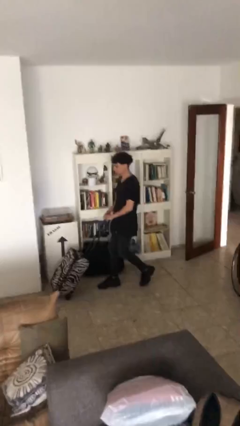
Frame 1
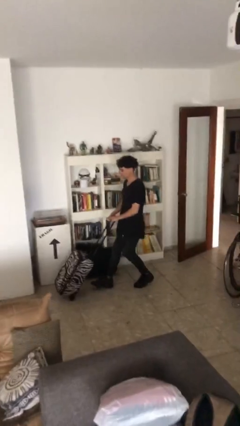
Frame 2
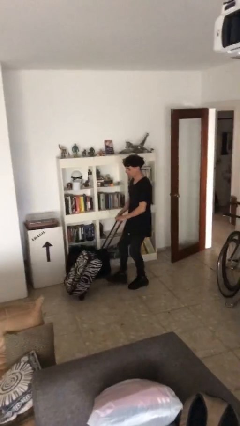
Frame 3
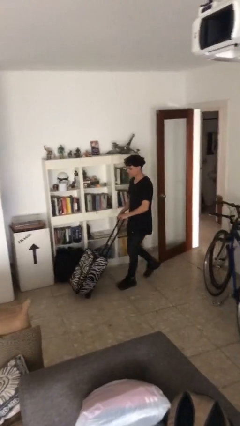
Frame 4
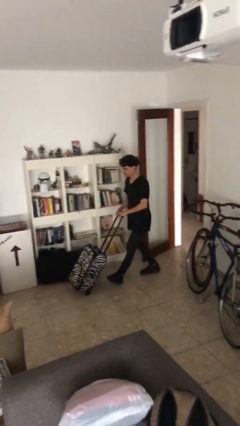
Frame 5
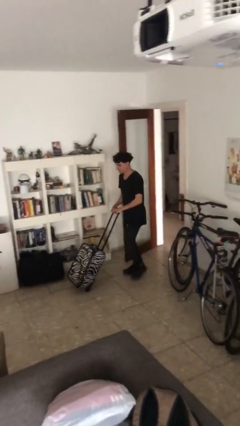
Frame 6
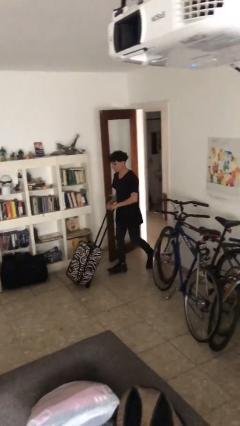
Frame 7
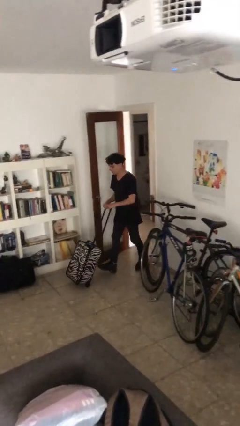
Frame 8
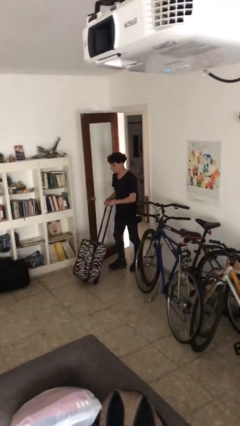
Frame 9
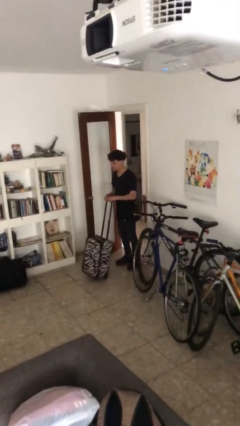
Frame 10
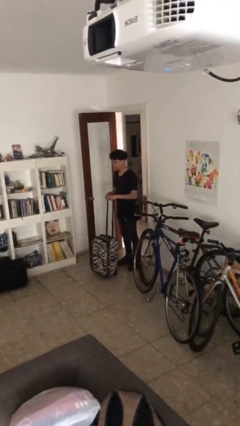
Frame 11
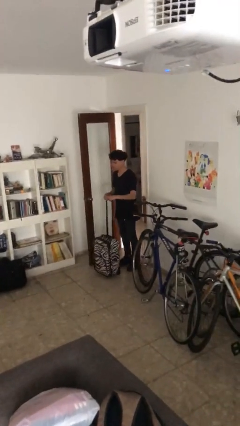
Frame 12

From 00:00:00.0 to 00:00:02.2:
person pulls wheeled cart

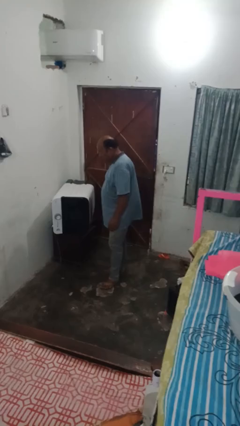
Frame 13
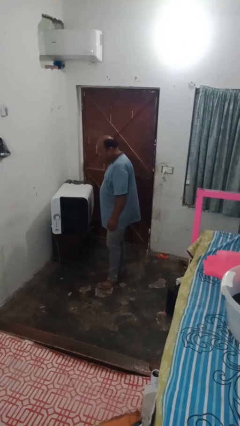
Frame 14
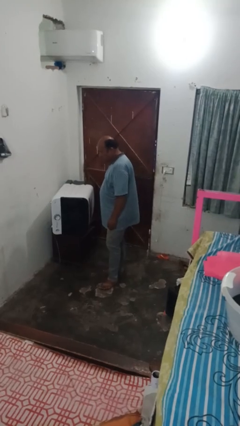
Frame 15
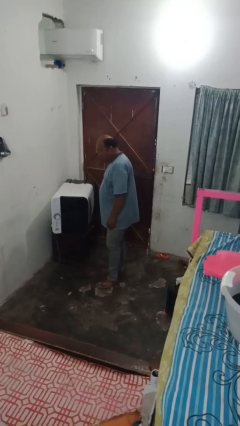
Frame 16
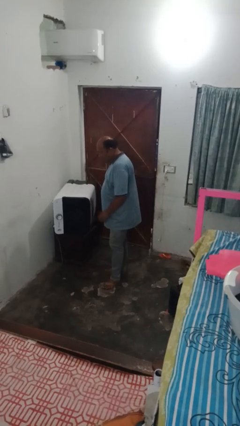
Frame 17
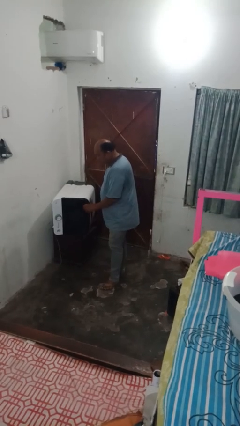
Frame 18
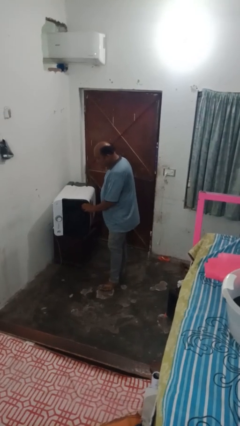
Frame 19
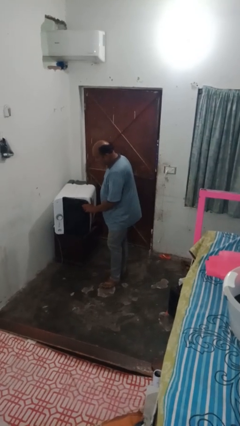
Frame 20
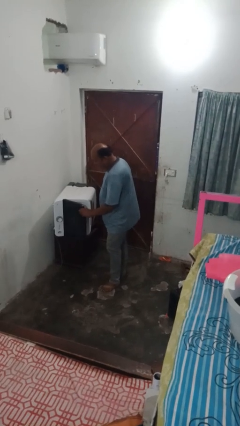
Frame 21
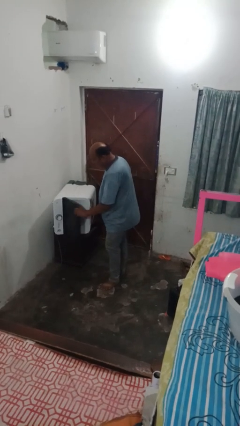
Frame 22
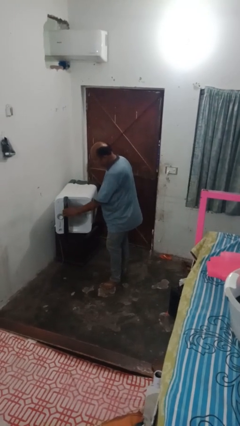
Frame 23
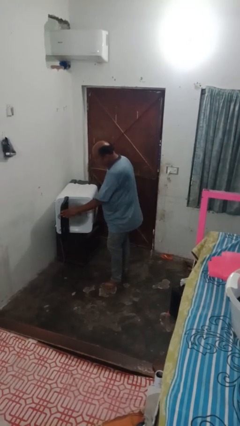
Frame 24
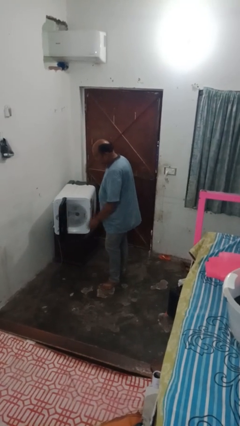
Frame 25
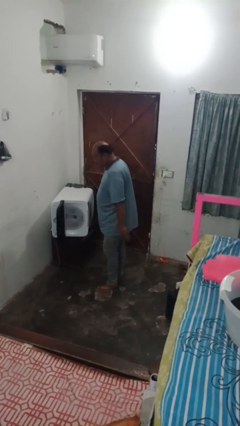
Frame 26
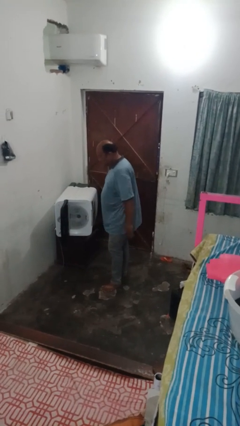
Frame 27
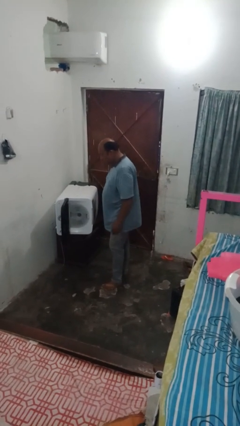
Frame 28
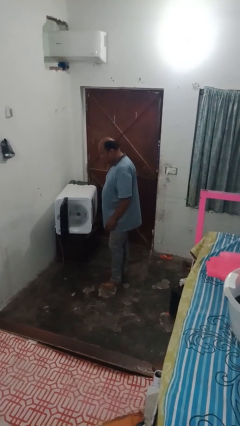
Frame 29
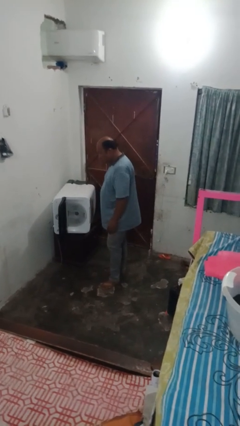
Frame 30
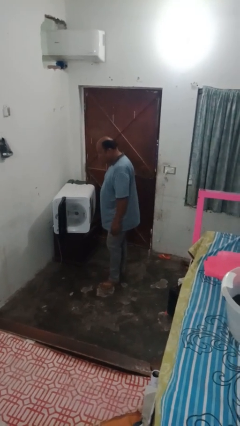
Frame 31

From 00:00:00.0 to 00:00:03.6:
person opens dishwasher

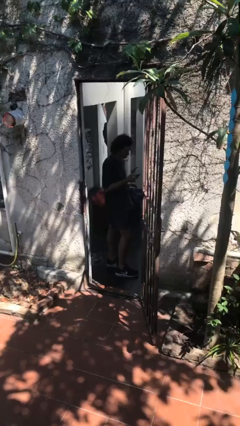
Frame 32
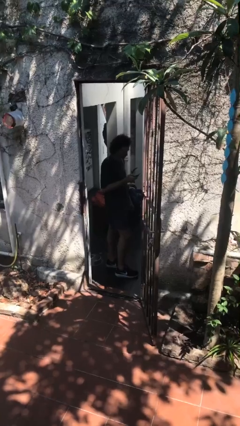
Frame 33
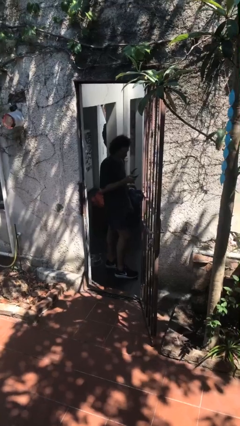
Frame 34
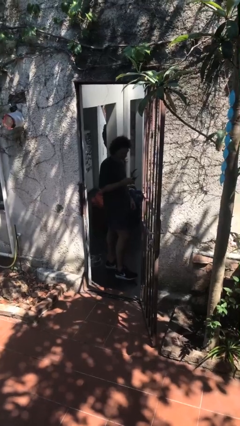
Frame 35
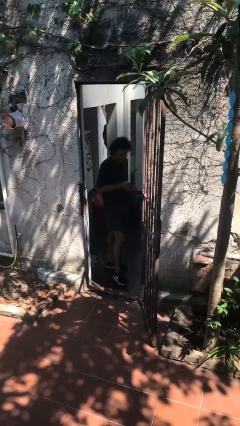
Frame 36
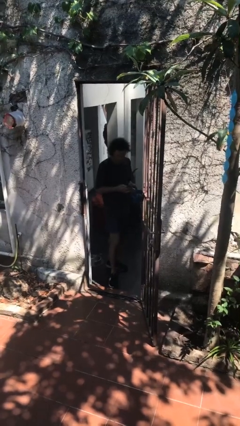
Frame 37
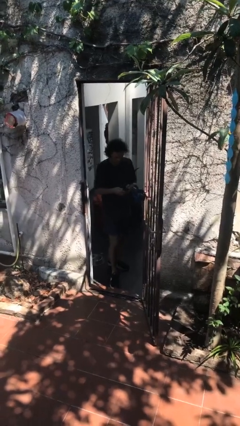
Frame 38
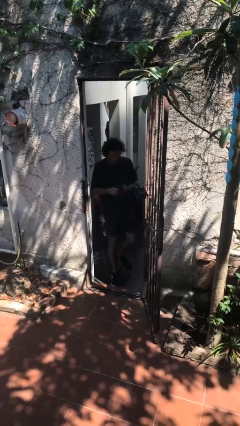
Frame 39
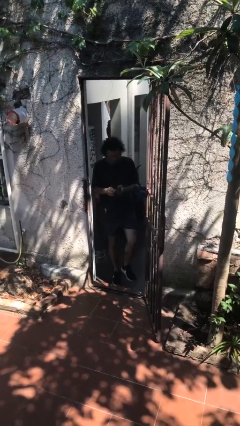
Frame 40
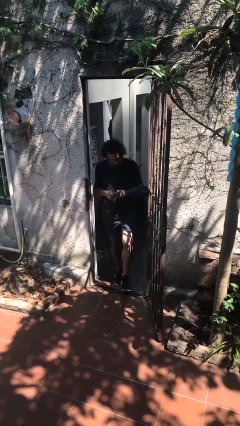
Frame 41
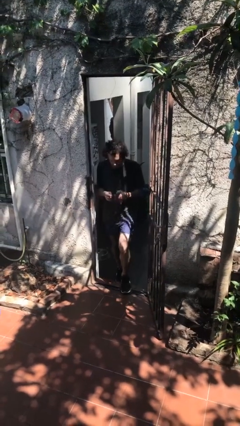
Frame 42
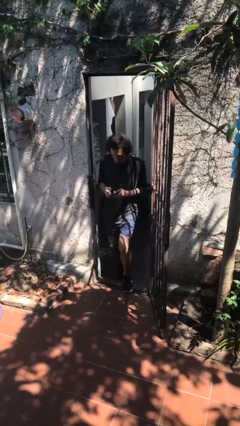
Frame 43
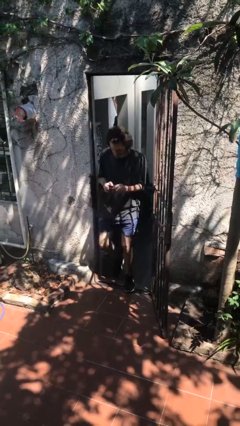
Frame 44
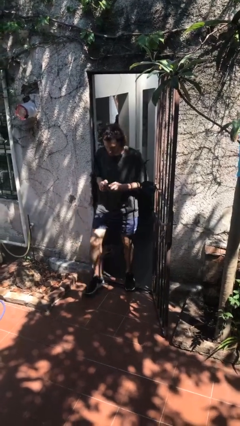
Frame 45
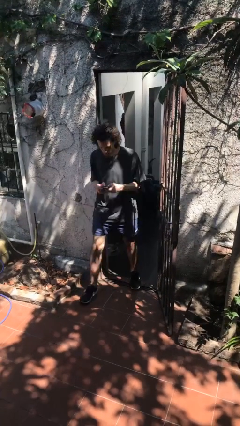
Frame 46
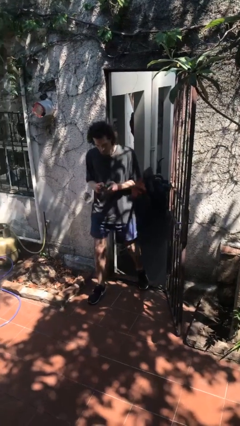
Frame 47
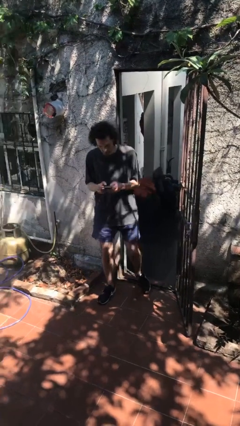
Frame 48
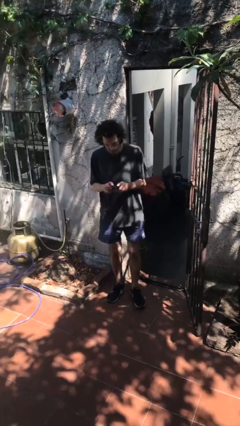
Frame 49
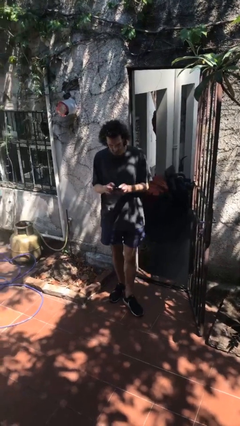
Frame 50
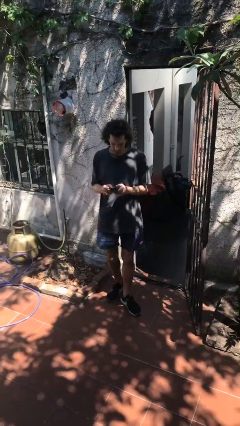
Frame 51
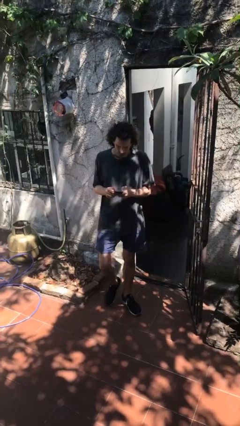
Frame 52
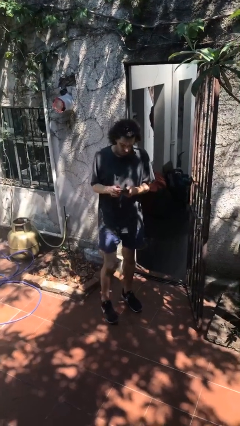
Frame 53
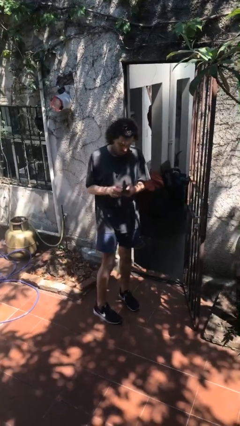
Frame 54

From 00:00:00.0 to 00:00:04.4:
person enters scene through structure

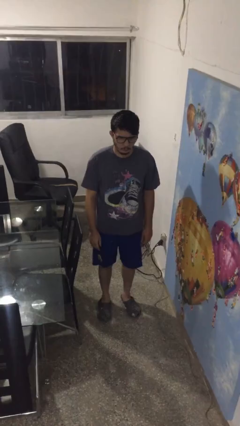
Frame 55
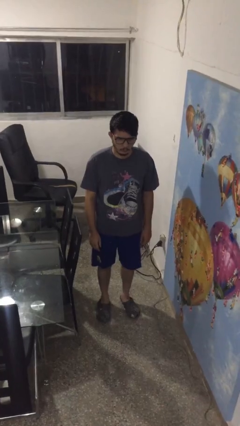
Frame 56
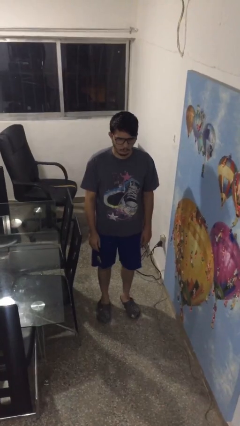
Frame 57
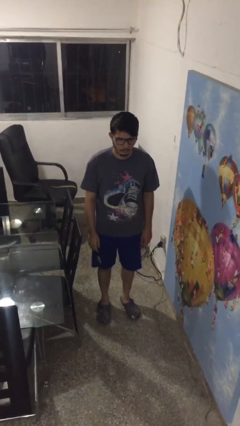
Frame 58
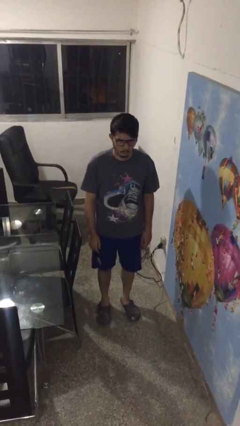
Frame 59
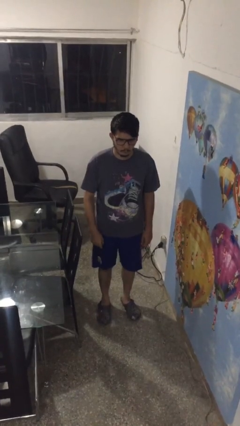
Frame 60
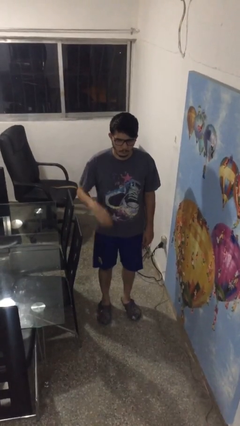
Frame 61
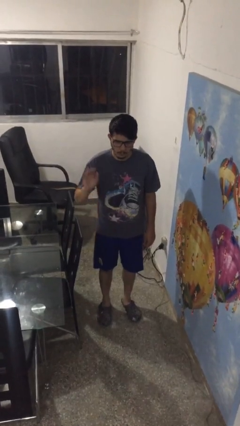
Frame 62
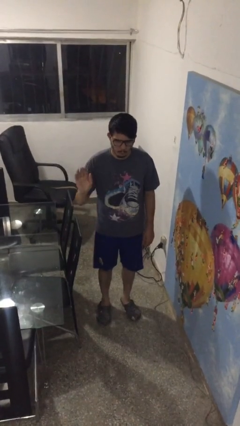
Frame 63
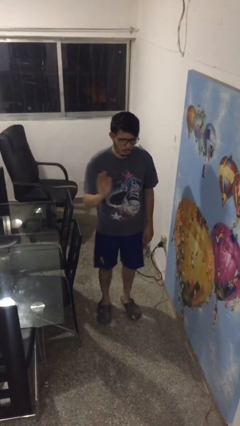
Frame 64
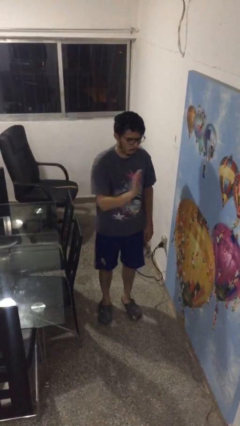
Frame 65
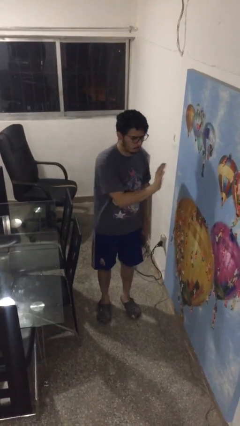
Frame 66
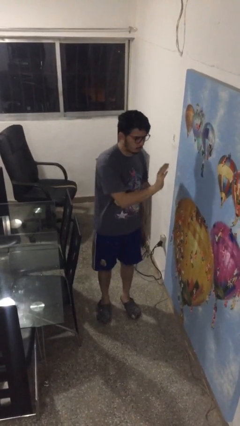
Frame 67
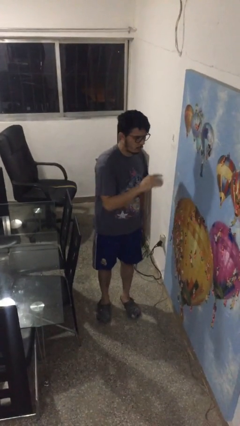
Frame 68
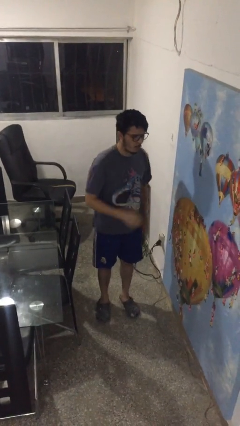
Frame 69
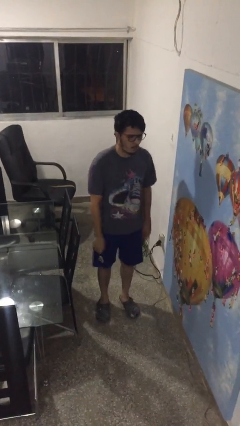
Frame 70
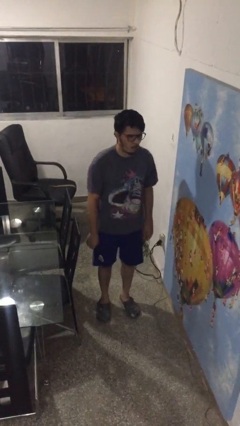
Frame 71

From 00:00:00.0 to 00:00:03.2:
person gestures swipe left

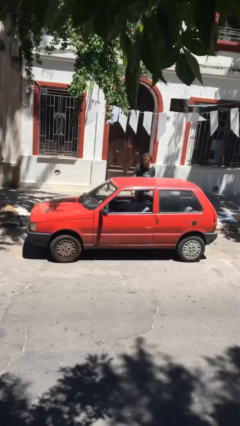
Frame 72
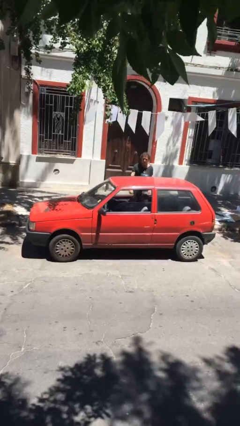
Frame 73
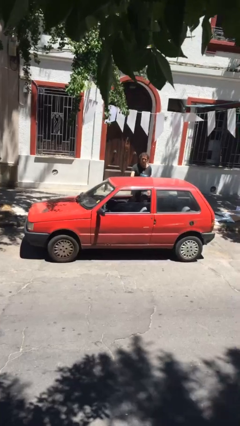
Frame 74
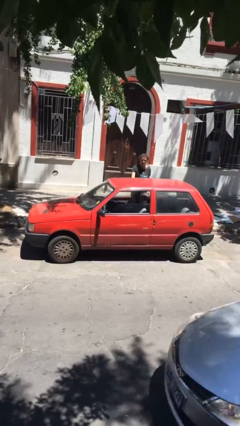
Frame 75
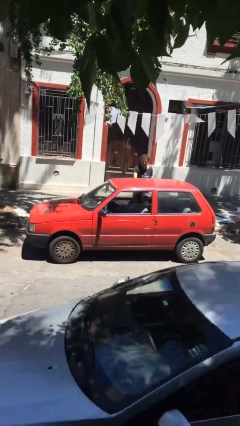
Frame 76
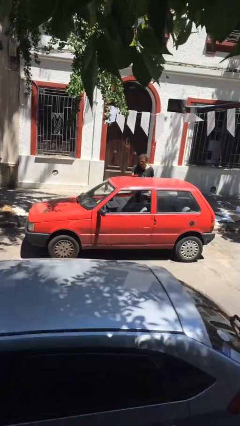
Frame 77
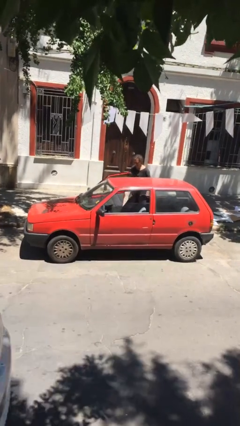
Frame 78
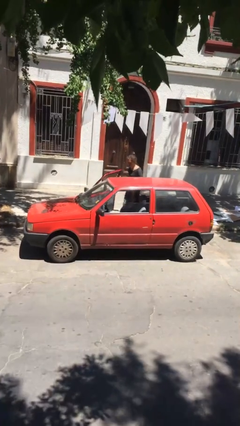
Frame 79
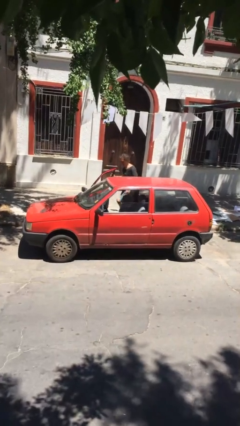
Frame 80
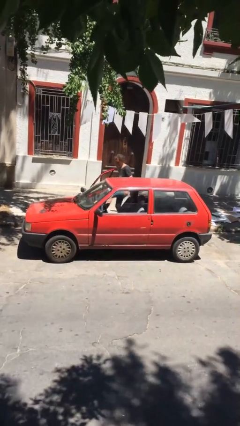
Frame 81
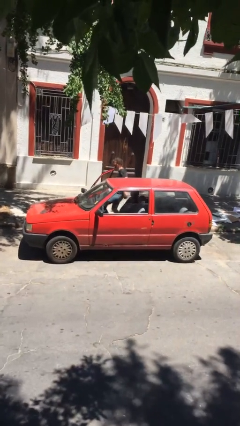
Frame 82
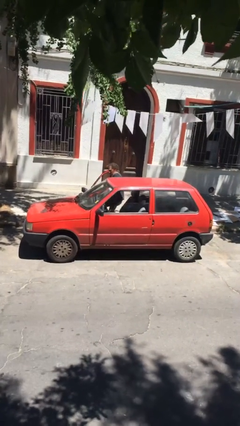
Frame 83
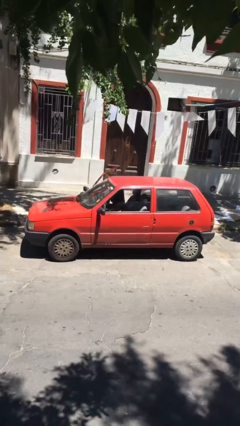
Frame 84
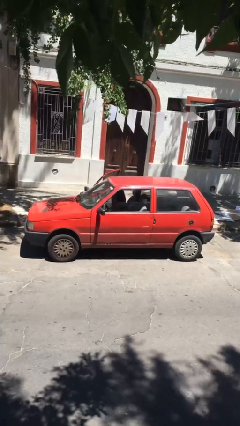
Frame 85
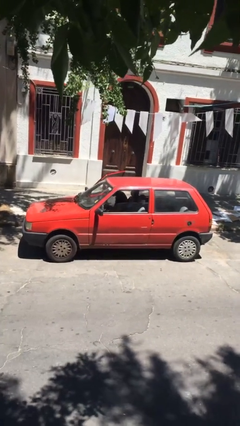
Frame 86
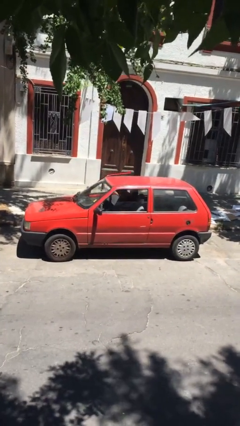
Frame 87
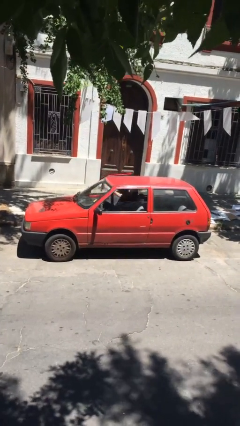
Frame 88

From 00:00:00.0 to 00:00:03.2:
car picks up person

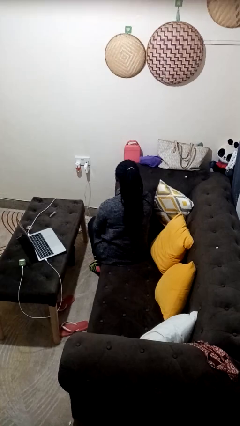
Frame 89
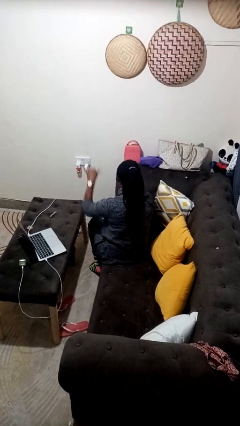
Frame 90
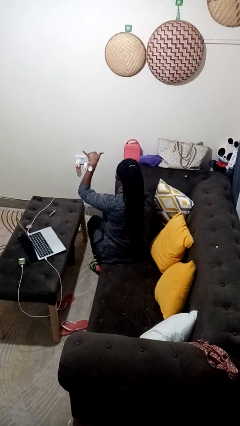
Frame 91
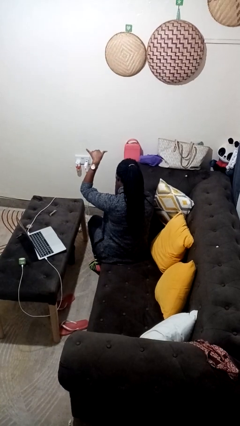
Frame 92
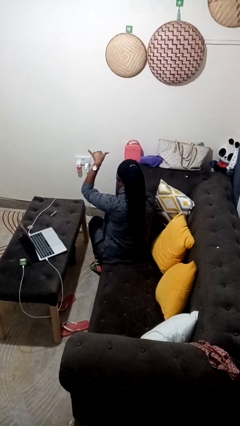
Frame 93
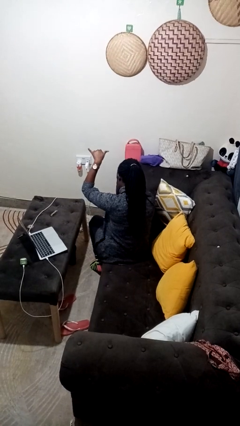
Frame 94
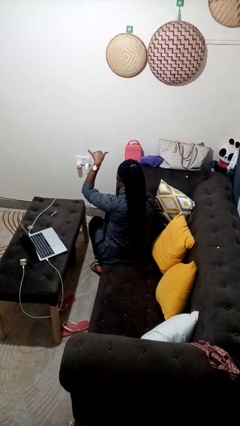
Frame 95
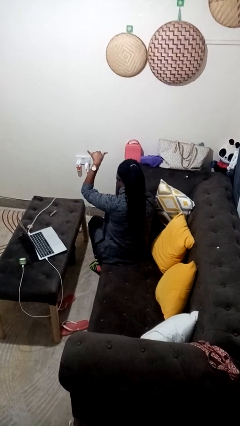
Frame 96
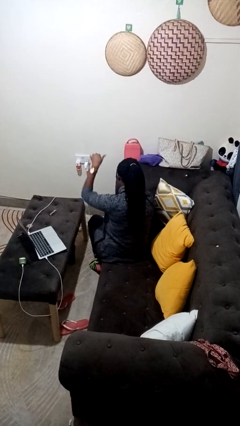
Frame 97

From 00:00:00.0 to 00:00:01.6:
person gestures hang loose
